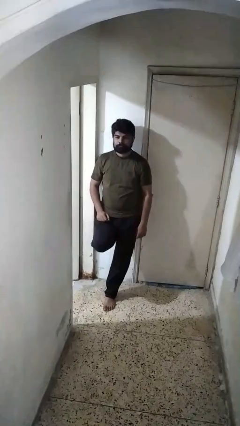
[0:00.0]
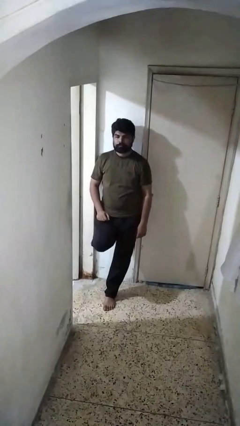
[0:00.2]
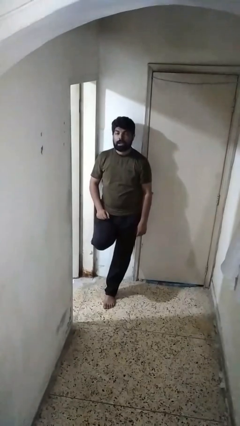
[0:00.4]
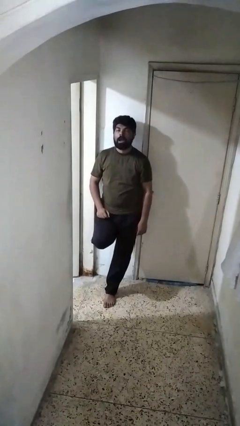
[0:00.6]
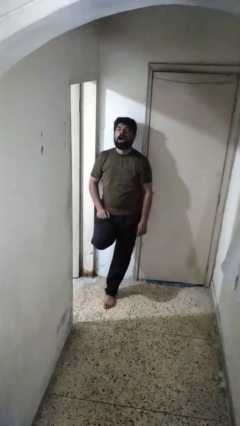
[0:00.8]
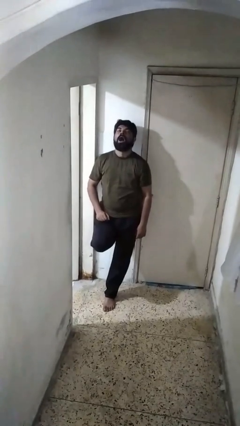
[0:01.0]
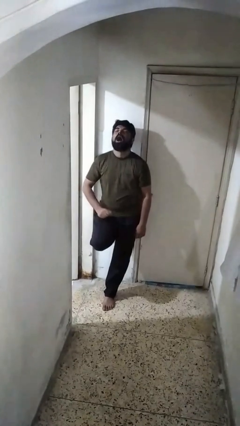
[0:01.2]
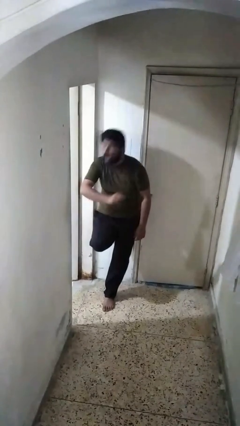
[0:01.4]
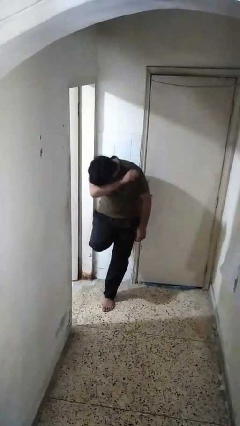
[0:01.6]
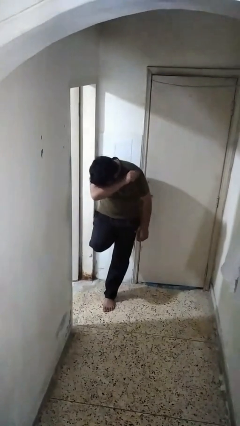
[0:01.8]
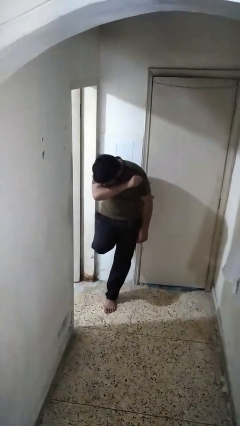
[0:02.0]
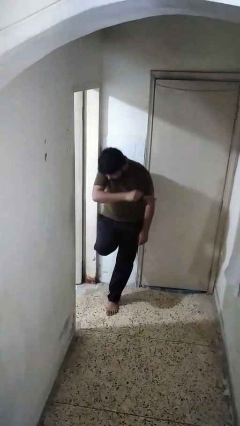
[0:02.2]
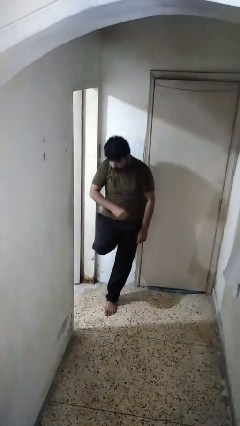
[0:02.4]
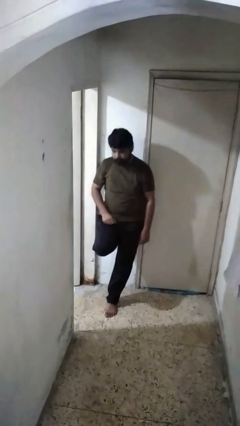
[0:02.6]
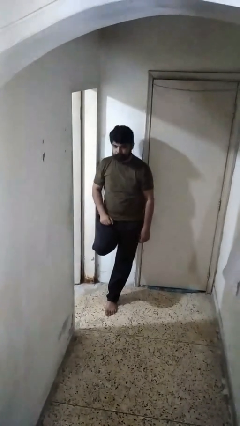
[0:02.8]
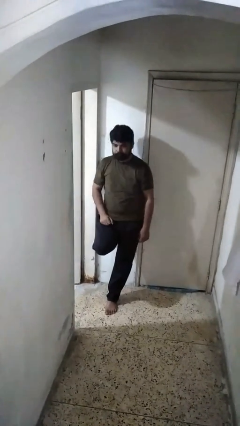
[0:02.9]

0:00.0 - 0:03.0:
person sneezes into arm

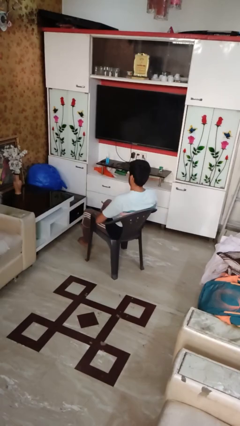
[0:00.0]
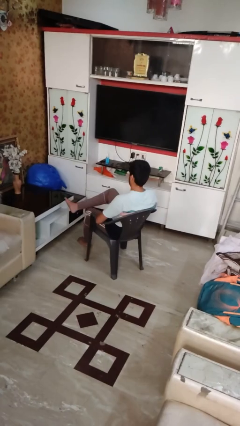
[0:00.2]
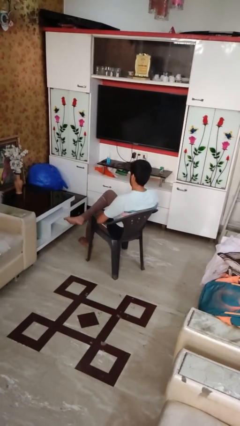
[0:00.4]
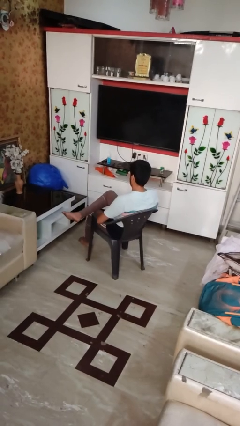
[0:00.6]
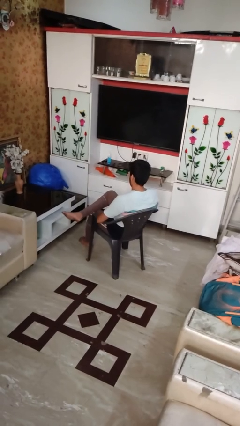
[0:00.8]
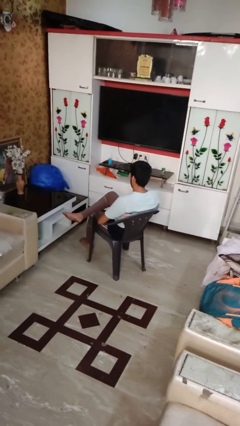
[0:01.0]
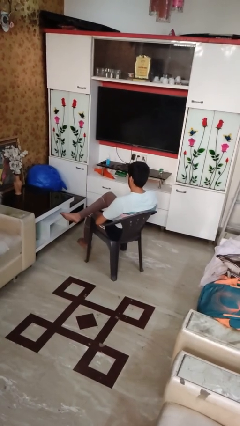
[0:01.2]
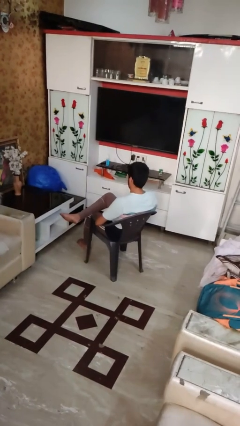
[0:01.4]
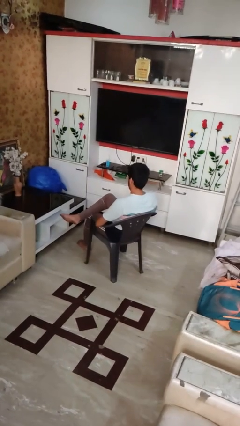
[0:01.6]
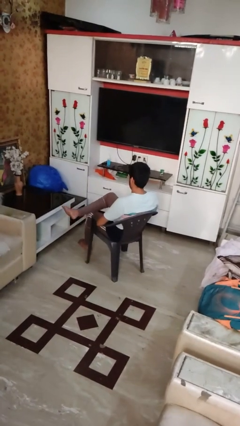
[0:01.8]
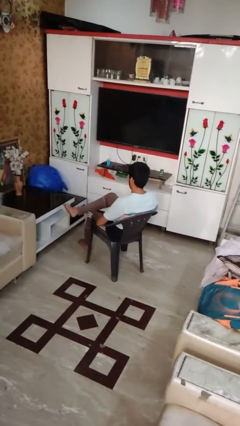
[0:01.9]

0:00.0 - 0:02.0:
person crosses legs

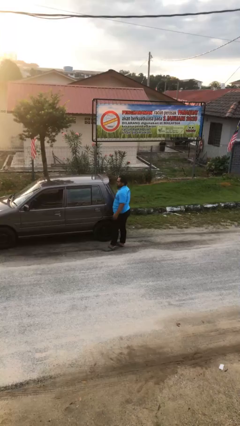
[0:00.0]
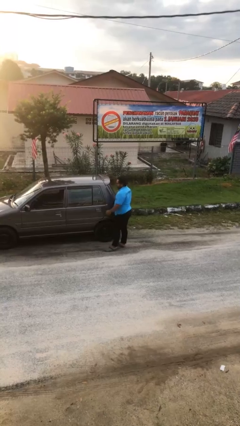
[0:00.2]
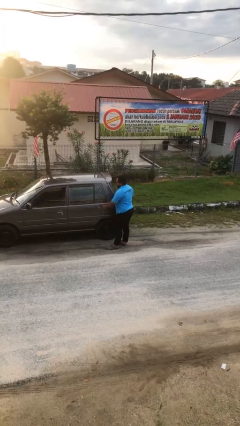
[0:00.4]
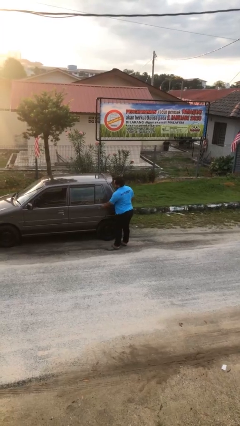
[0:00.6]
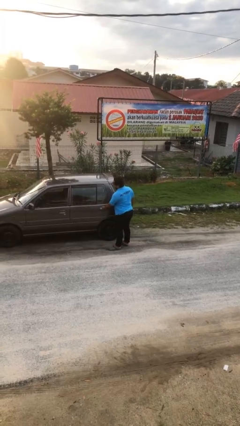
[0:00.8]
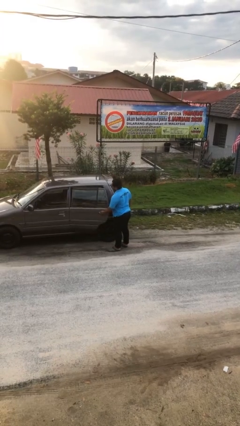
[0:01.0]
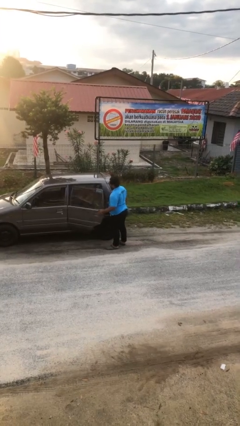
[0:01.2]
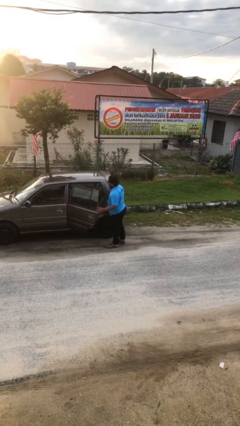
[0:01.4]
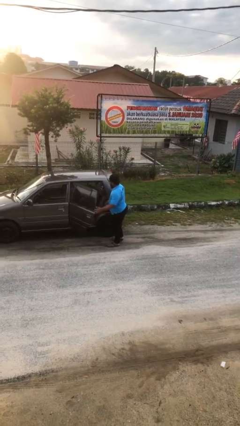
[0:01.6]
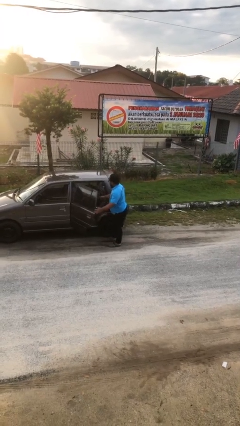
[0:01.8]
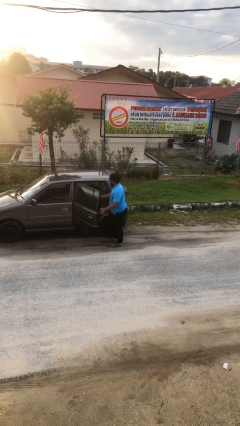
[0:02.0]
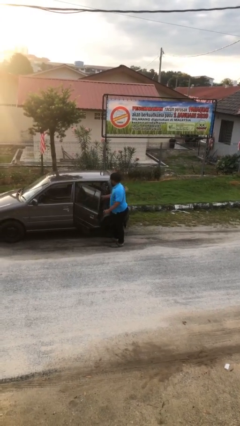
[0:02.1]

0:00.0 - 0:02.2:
person opens car door

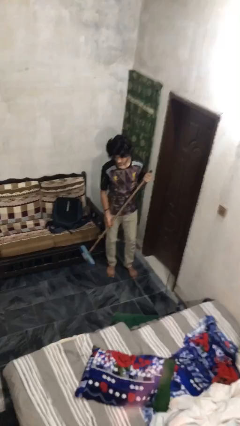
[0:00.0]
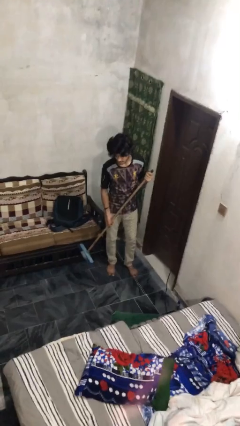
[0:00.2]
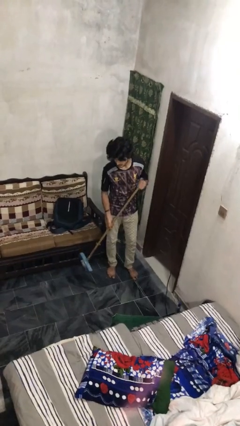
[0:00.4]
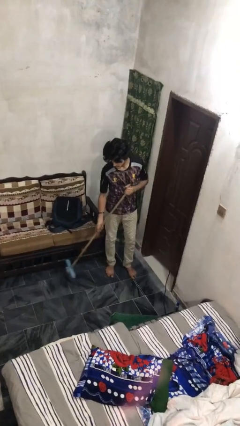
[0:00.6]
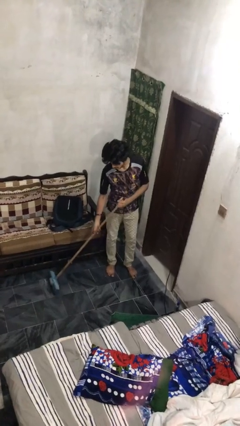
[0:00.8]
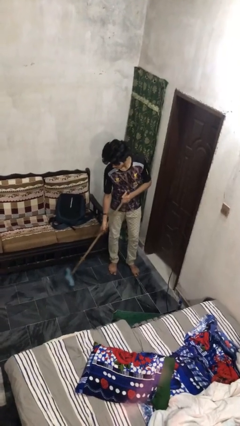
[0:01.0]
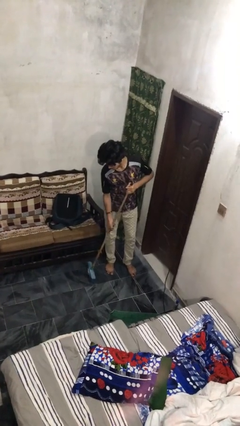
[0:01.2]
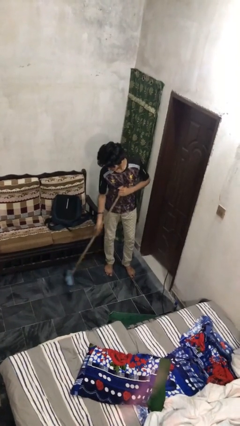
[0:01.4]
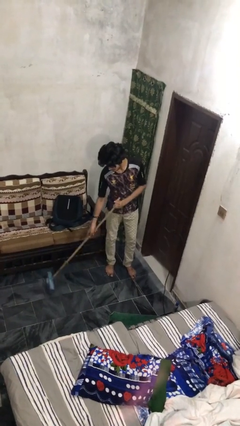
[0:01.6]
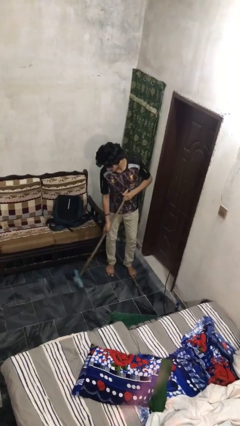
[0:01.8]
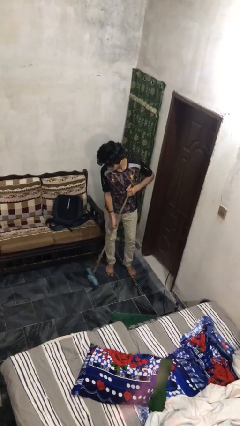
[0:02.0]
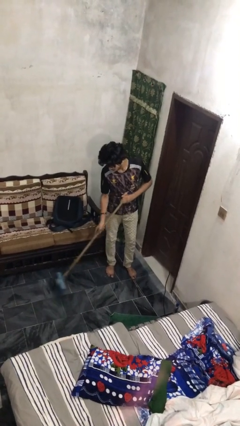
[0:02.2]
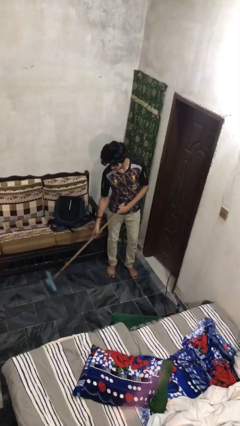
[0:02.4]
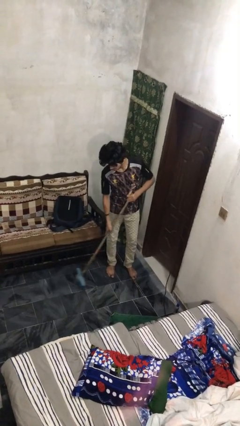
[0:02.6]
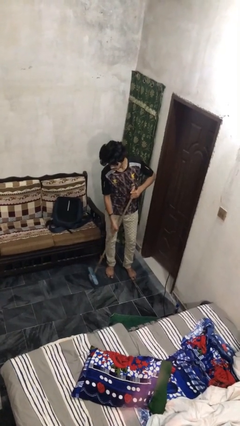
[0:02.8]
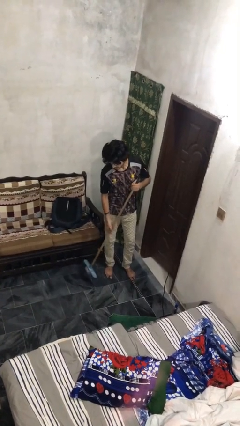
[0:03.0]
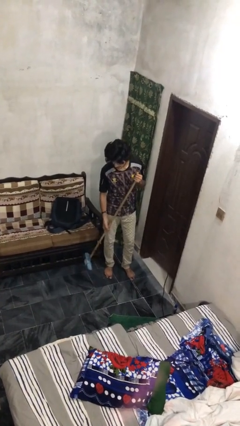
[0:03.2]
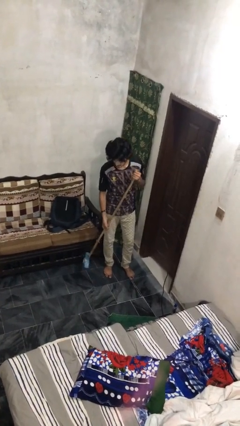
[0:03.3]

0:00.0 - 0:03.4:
person sweeps floor

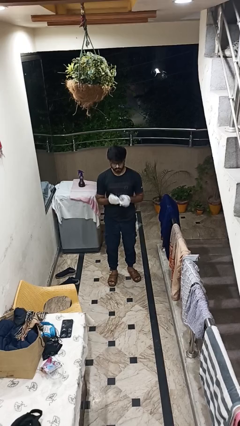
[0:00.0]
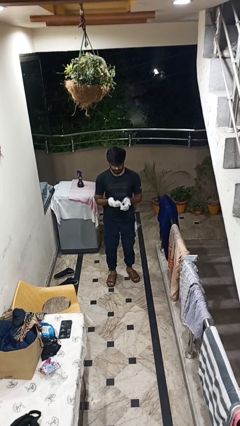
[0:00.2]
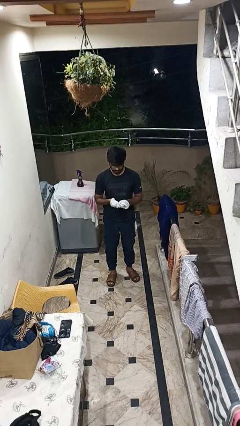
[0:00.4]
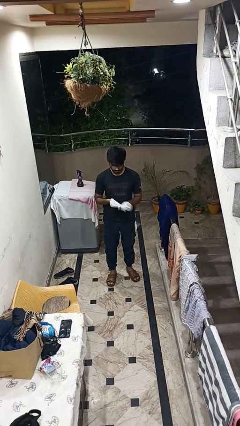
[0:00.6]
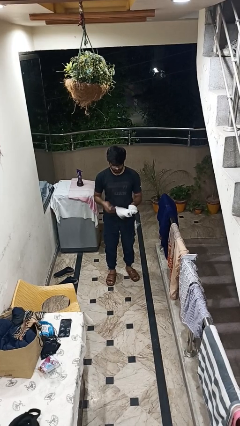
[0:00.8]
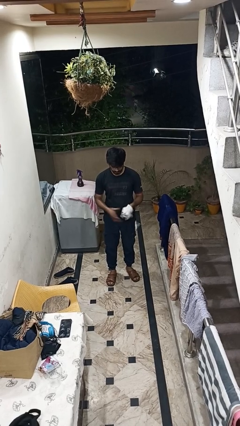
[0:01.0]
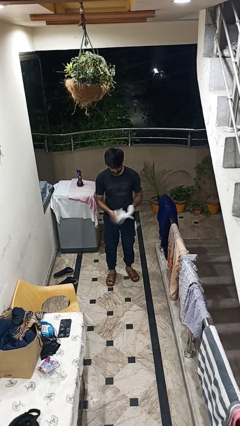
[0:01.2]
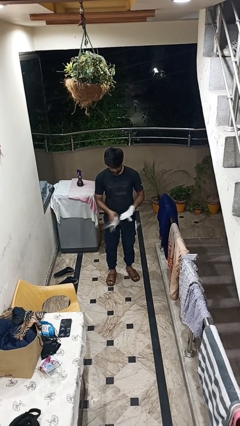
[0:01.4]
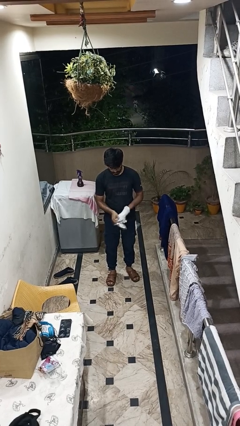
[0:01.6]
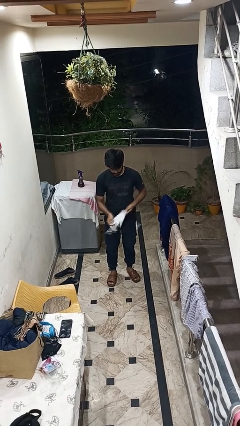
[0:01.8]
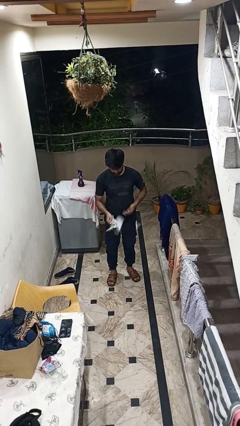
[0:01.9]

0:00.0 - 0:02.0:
person takes off gloves

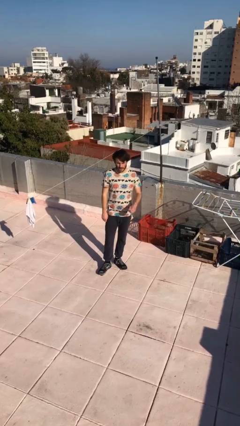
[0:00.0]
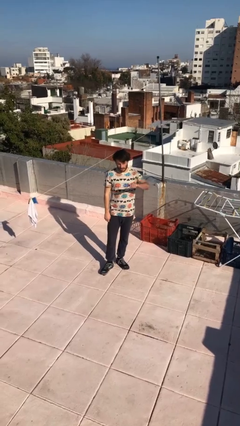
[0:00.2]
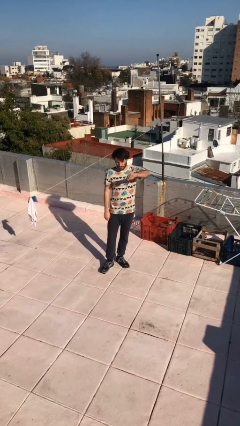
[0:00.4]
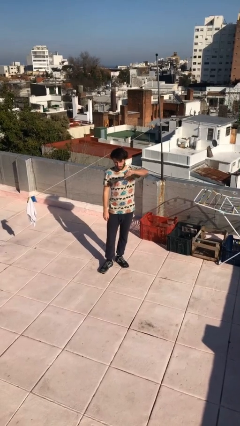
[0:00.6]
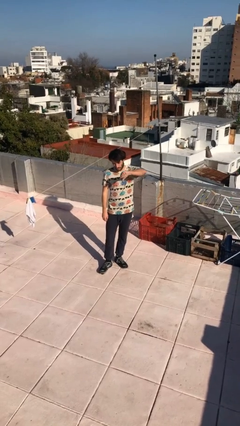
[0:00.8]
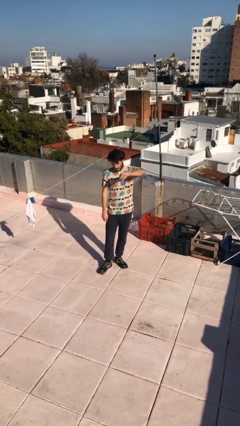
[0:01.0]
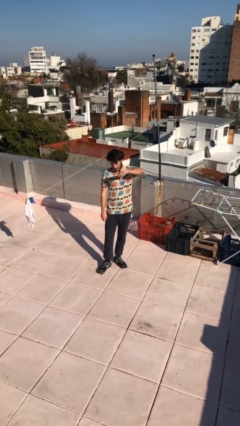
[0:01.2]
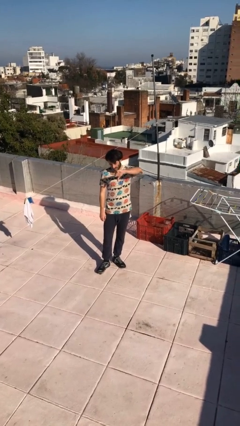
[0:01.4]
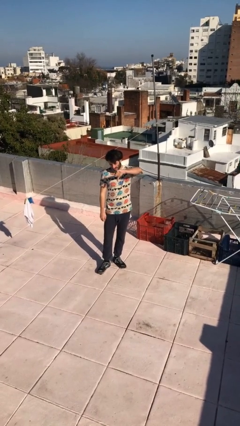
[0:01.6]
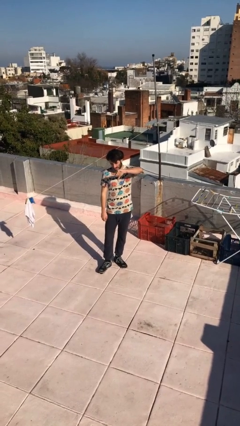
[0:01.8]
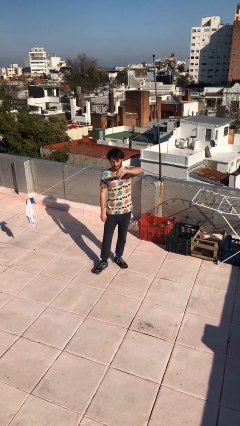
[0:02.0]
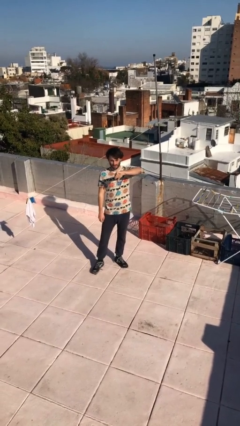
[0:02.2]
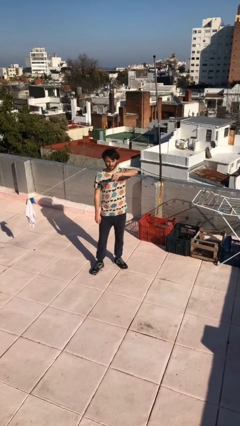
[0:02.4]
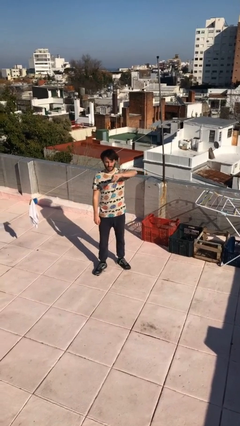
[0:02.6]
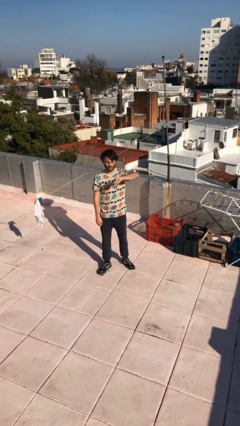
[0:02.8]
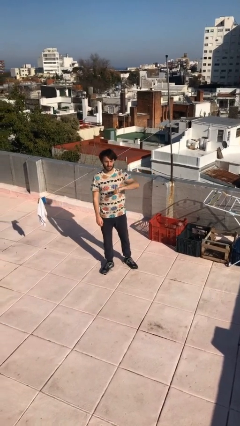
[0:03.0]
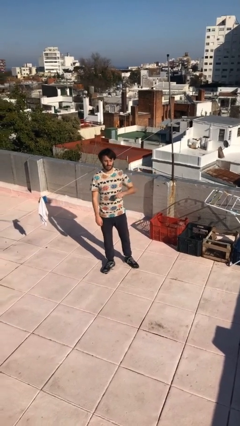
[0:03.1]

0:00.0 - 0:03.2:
person gestures thumbs down

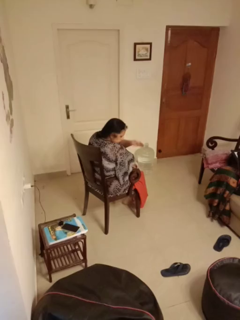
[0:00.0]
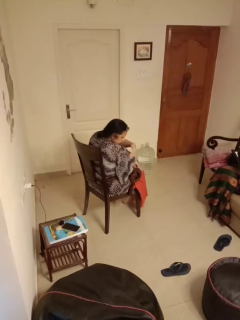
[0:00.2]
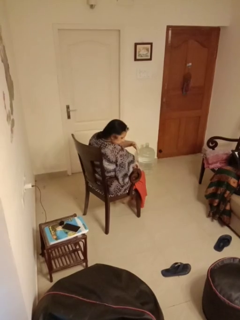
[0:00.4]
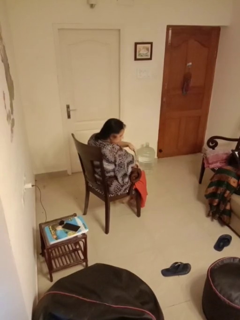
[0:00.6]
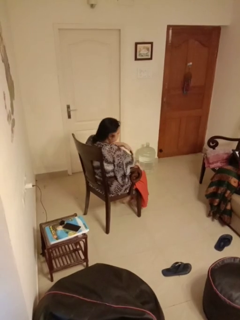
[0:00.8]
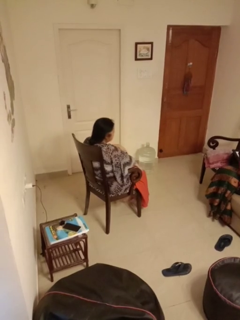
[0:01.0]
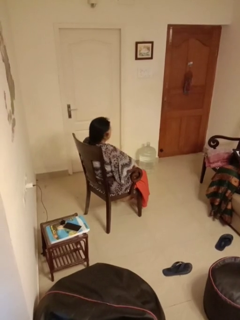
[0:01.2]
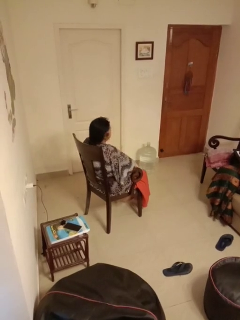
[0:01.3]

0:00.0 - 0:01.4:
person swats bug

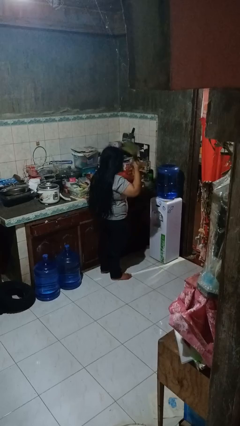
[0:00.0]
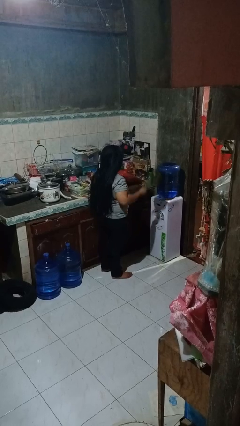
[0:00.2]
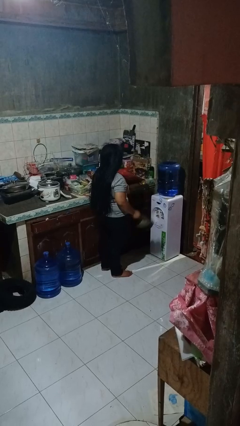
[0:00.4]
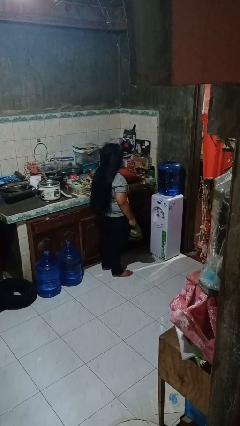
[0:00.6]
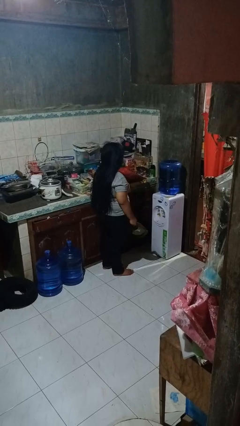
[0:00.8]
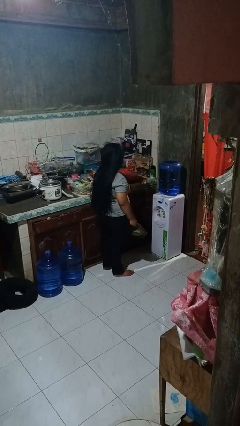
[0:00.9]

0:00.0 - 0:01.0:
person takes off hat
